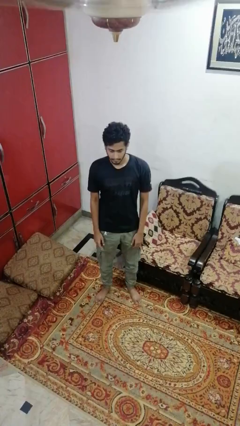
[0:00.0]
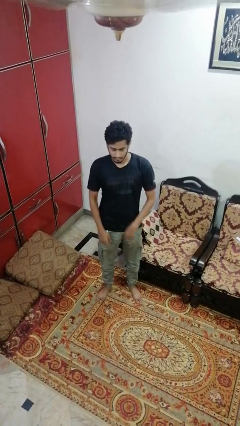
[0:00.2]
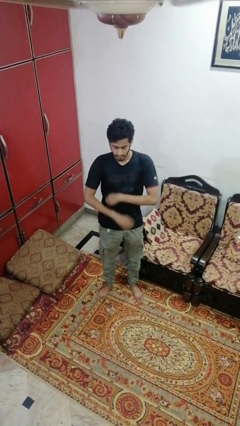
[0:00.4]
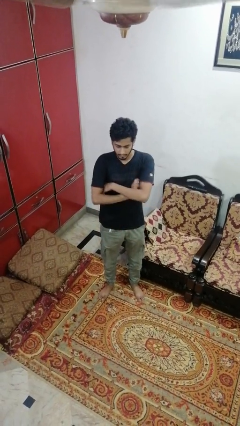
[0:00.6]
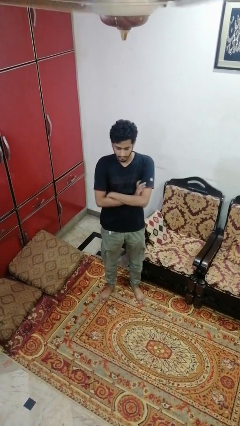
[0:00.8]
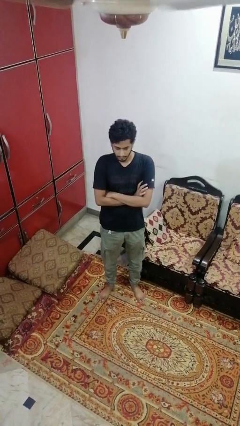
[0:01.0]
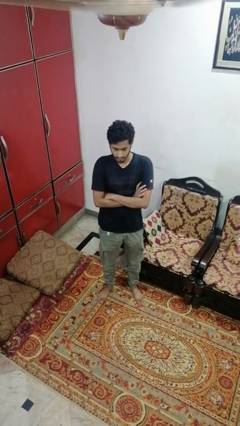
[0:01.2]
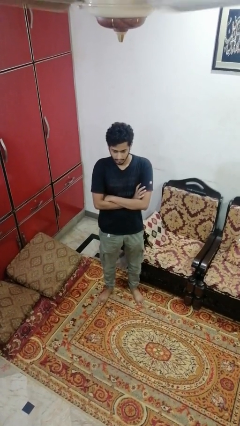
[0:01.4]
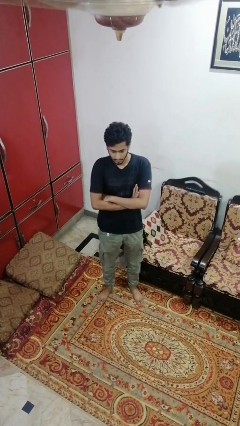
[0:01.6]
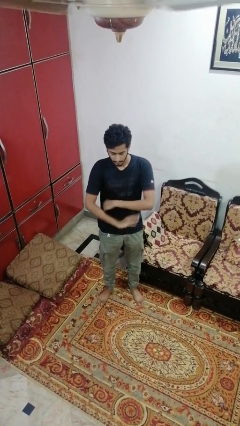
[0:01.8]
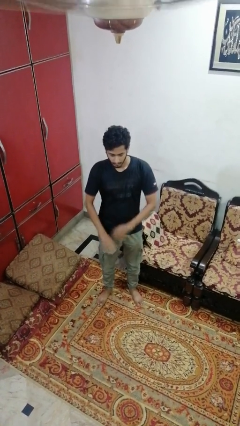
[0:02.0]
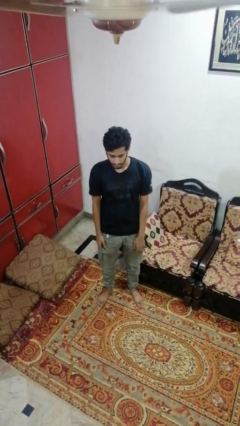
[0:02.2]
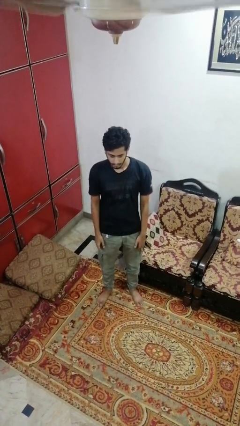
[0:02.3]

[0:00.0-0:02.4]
person crosses arms

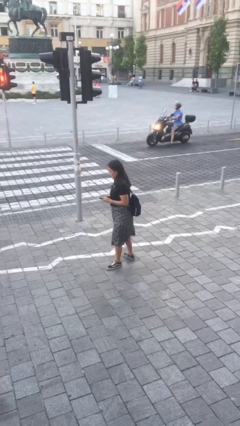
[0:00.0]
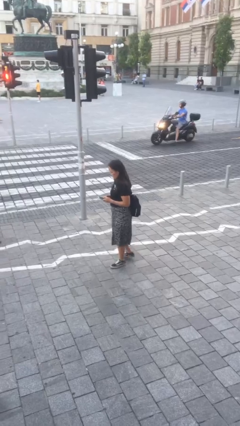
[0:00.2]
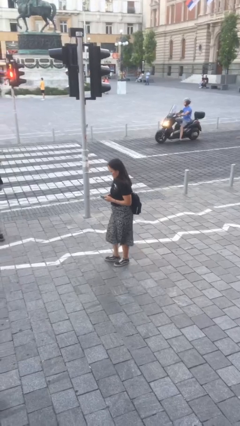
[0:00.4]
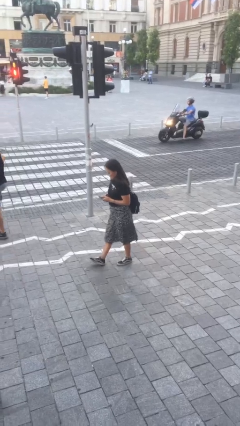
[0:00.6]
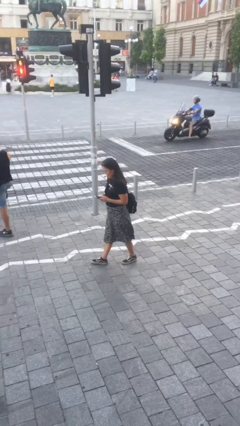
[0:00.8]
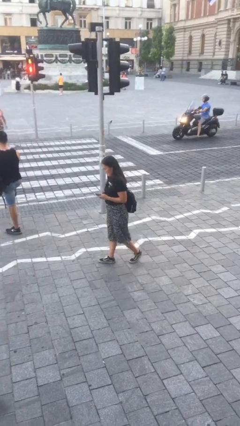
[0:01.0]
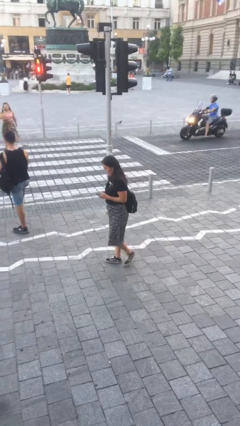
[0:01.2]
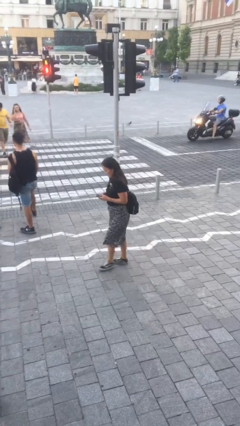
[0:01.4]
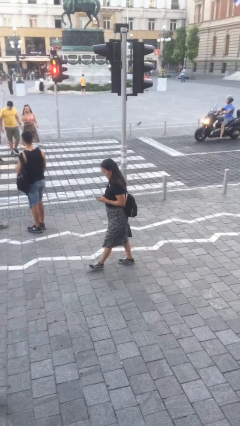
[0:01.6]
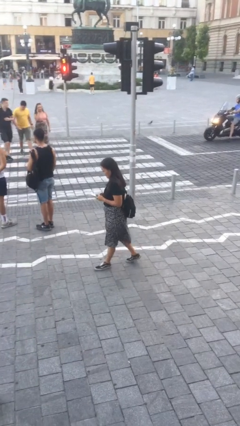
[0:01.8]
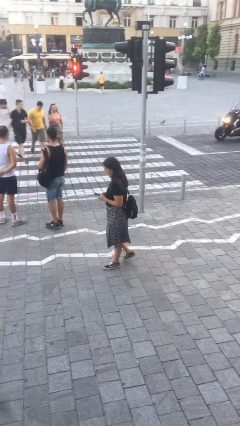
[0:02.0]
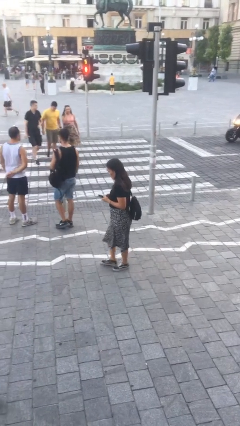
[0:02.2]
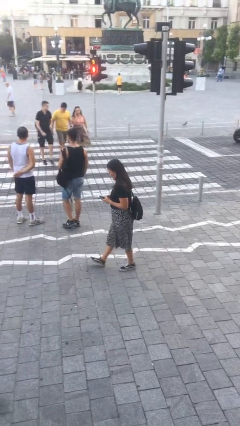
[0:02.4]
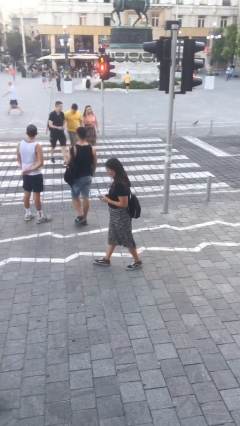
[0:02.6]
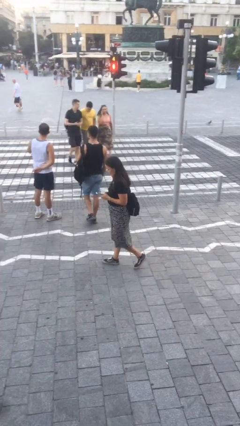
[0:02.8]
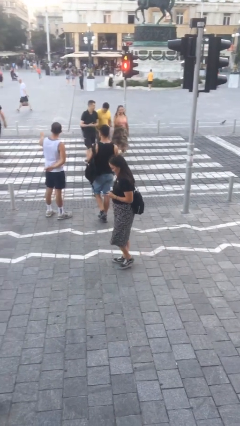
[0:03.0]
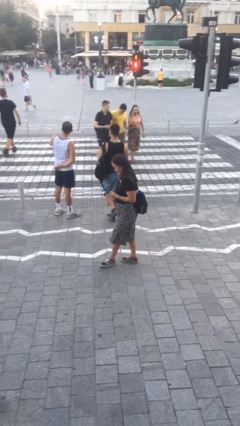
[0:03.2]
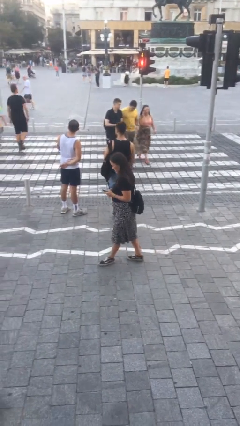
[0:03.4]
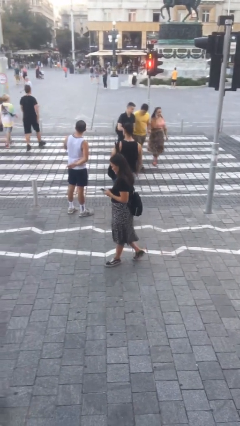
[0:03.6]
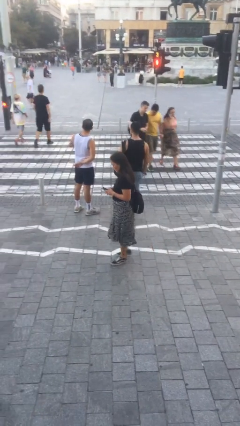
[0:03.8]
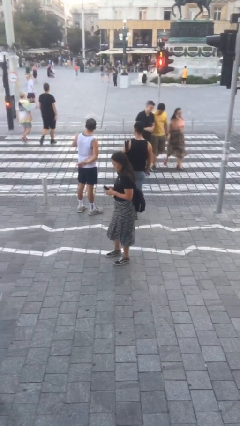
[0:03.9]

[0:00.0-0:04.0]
person texts on phone

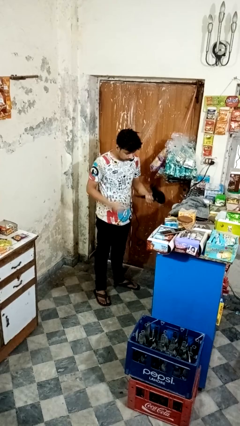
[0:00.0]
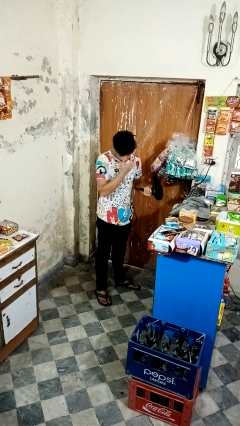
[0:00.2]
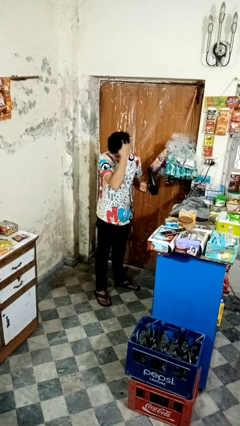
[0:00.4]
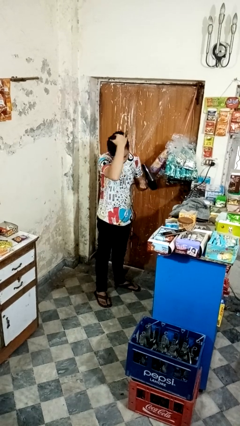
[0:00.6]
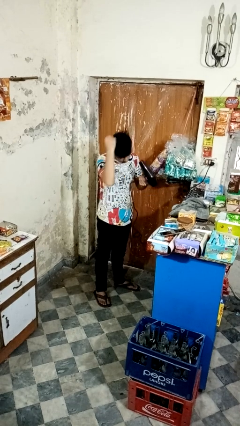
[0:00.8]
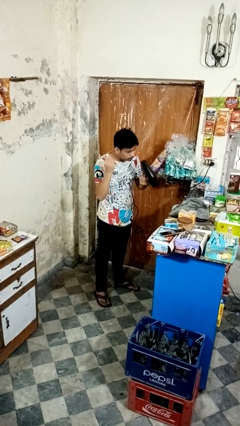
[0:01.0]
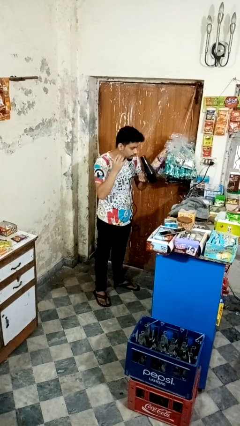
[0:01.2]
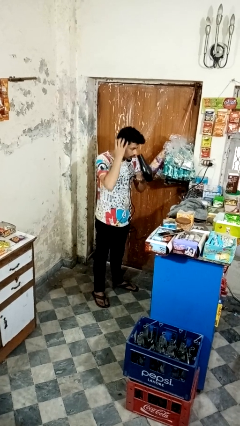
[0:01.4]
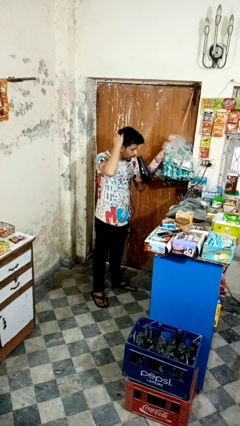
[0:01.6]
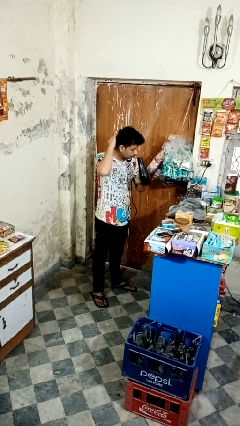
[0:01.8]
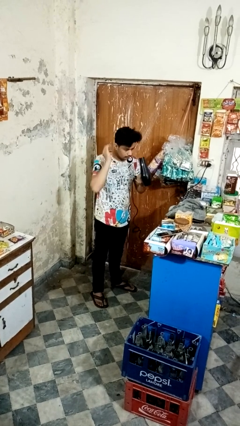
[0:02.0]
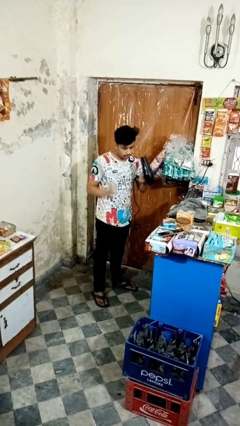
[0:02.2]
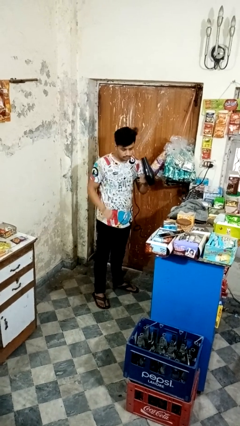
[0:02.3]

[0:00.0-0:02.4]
person dries hair with hairdryer

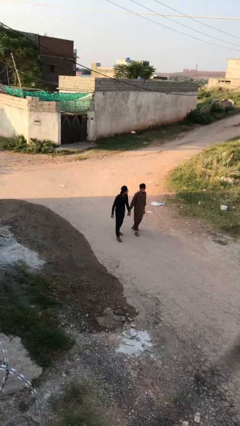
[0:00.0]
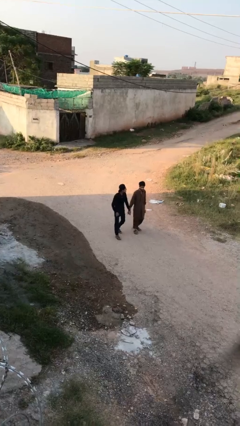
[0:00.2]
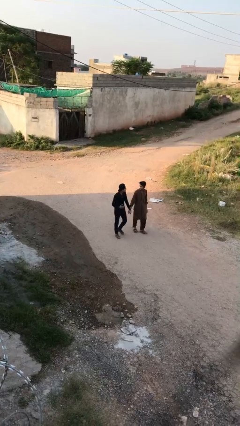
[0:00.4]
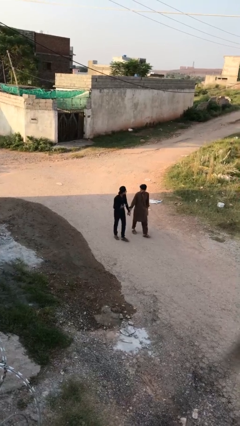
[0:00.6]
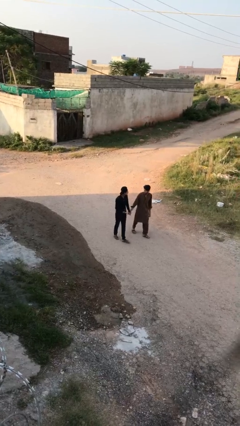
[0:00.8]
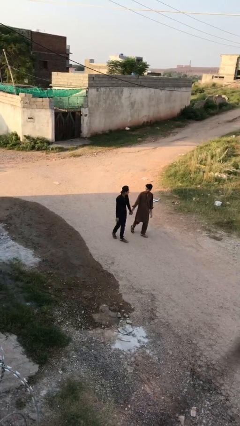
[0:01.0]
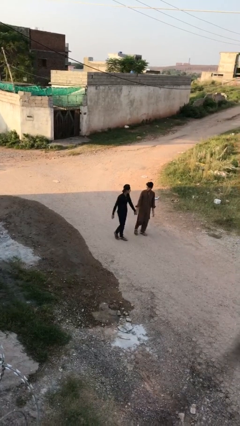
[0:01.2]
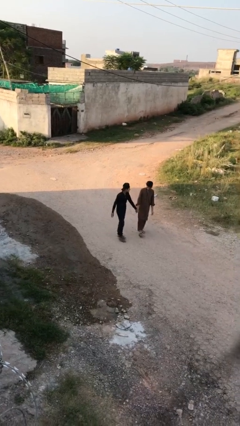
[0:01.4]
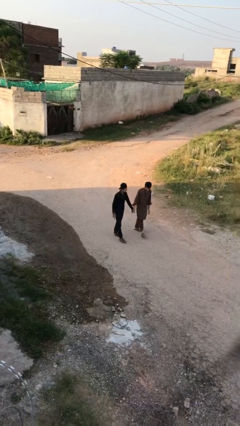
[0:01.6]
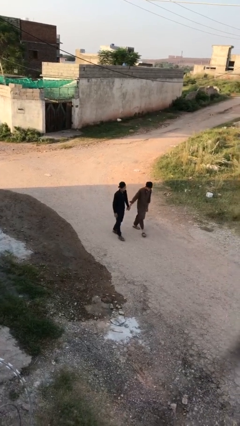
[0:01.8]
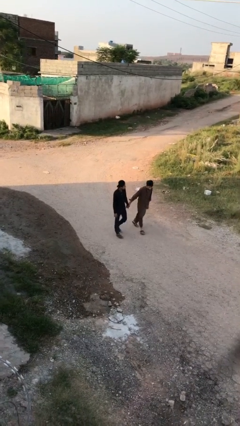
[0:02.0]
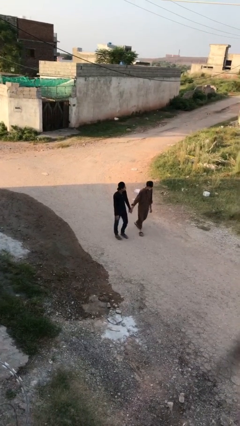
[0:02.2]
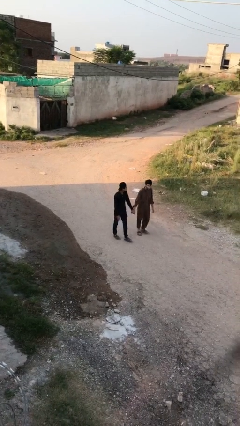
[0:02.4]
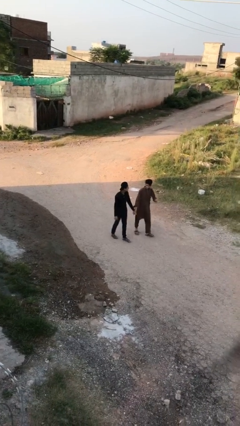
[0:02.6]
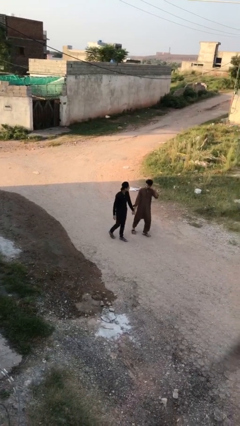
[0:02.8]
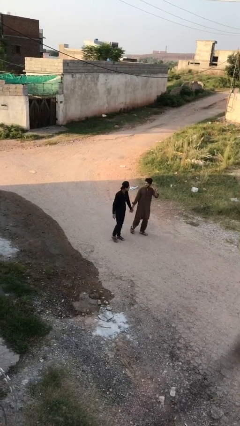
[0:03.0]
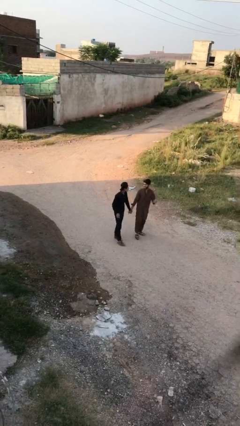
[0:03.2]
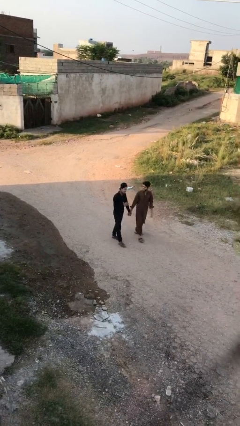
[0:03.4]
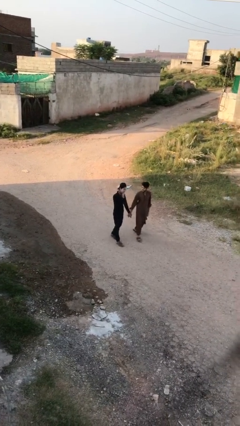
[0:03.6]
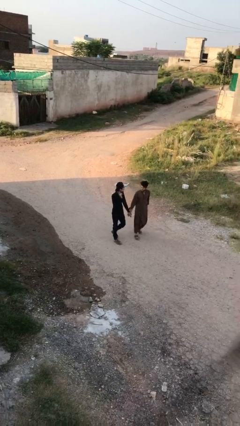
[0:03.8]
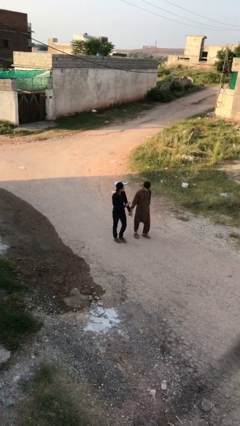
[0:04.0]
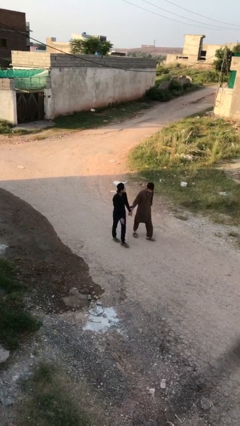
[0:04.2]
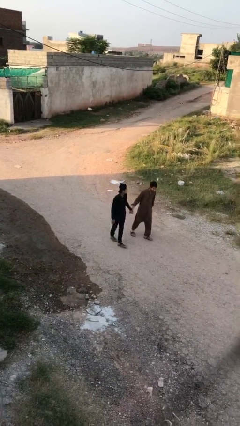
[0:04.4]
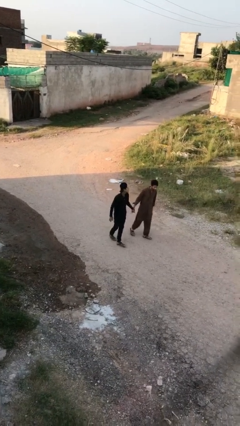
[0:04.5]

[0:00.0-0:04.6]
person holds hand

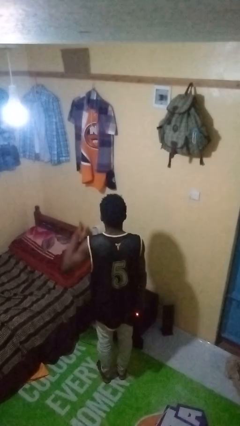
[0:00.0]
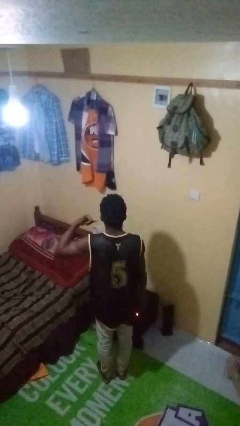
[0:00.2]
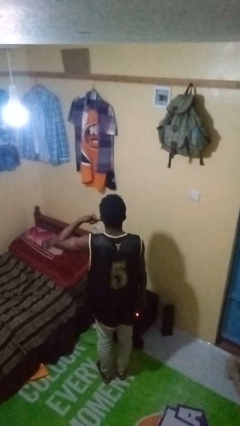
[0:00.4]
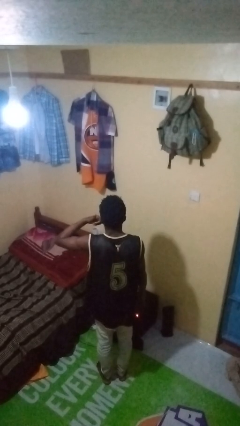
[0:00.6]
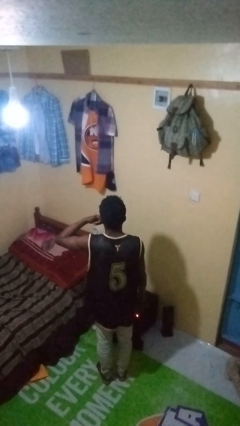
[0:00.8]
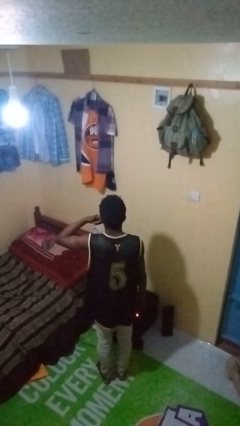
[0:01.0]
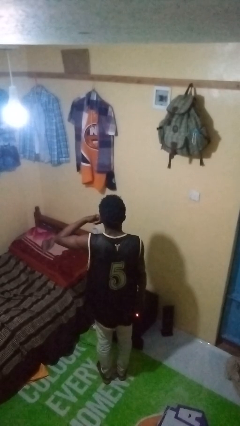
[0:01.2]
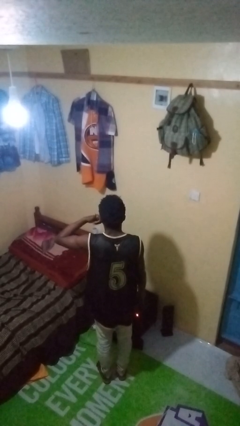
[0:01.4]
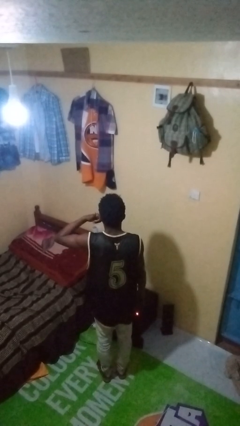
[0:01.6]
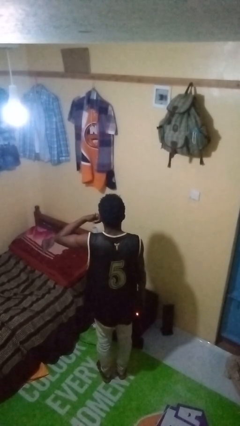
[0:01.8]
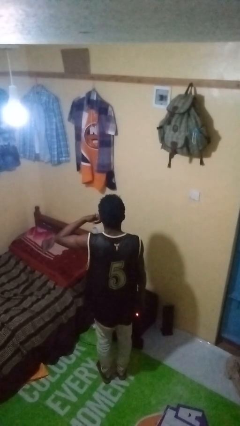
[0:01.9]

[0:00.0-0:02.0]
person gestures call me

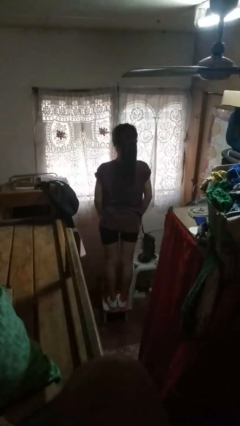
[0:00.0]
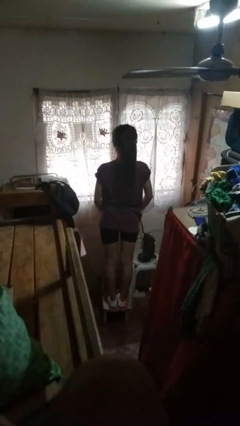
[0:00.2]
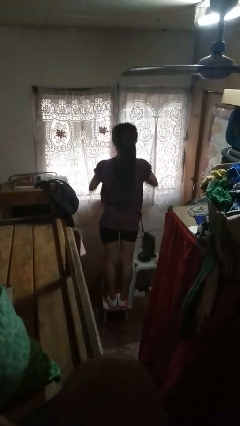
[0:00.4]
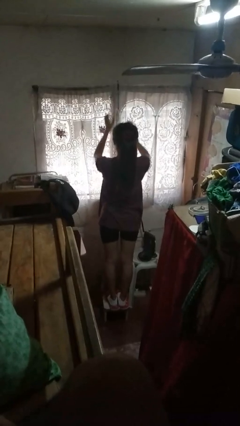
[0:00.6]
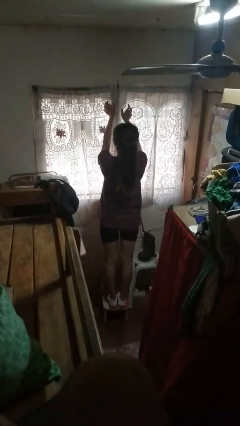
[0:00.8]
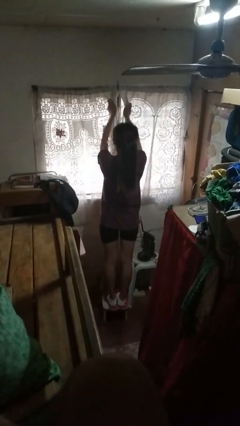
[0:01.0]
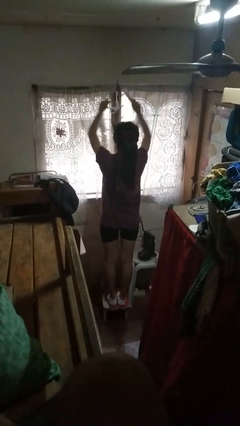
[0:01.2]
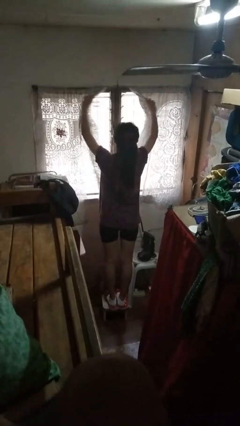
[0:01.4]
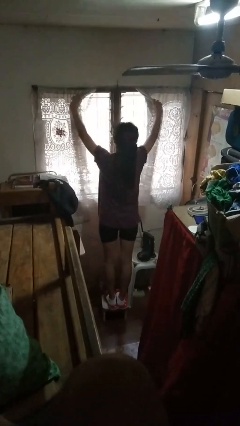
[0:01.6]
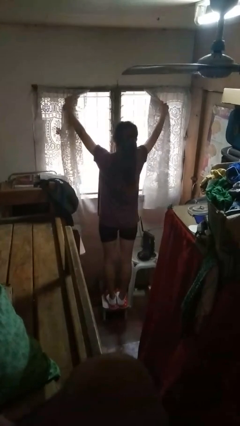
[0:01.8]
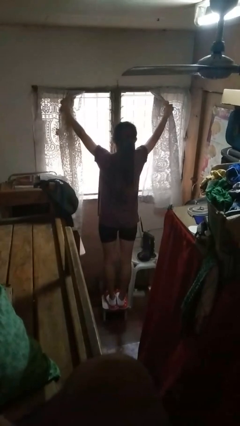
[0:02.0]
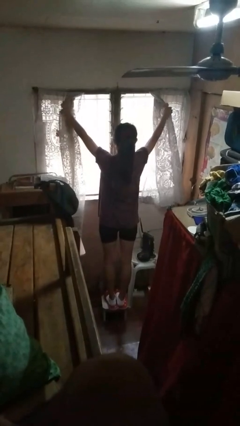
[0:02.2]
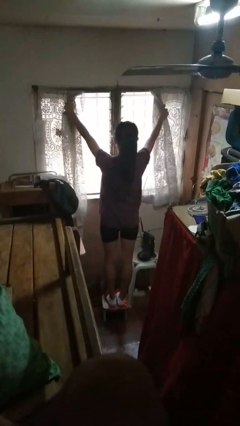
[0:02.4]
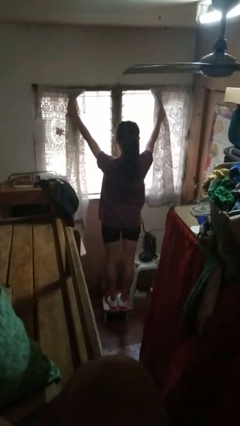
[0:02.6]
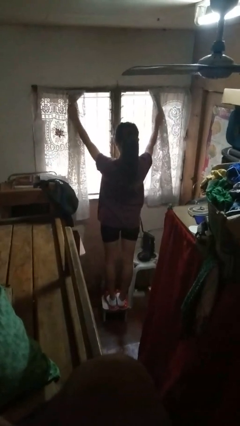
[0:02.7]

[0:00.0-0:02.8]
person opens curtains
